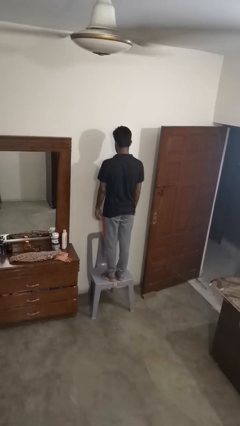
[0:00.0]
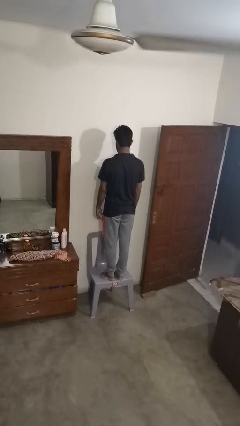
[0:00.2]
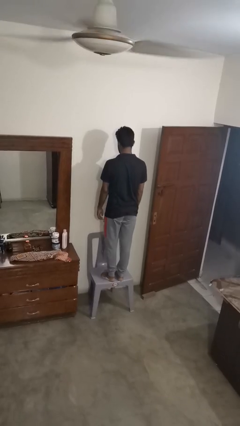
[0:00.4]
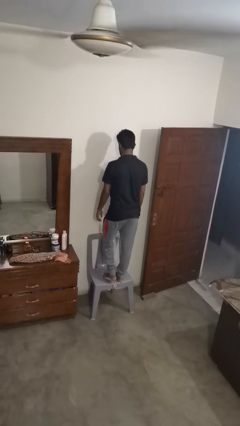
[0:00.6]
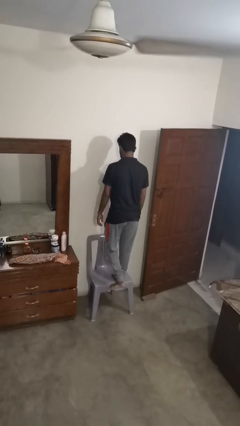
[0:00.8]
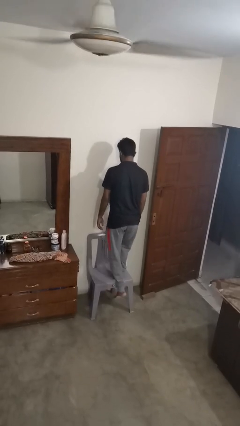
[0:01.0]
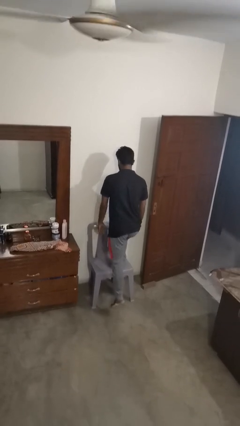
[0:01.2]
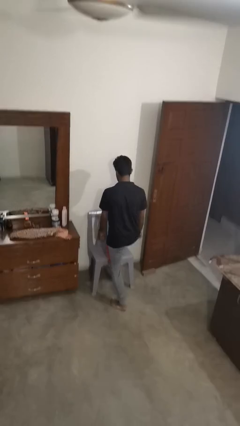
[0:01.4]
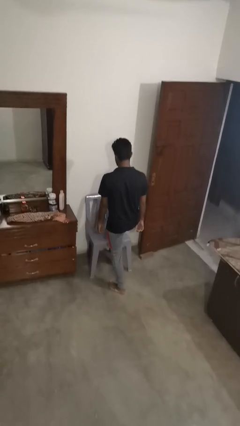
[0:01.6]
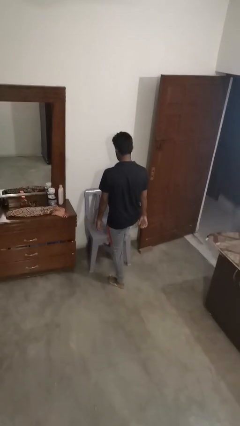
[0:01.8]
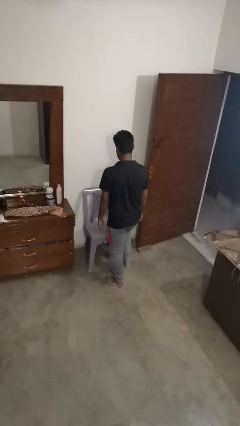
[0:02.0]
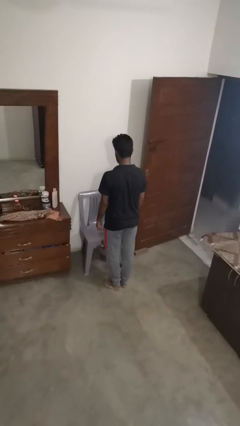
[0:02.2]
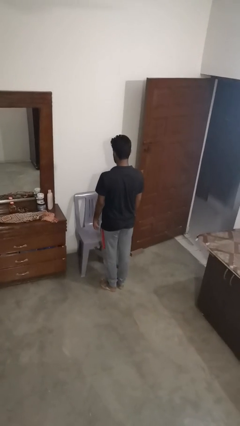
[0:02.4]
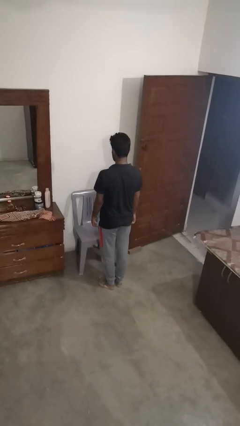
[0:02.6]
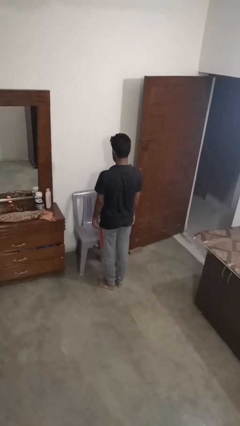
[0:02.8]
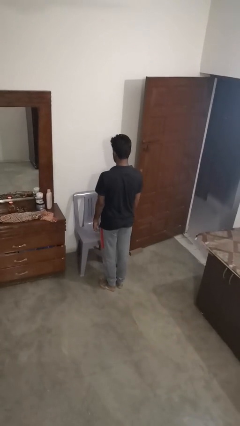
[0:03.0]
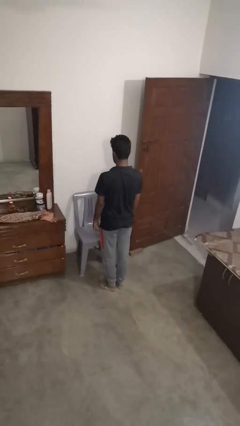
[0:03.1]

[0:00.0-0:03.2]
person climbs off chair

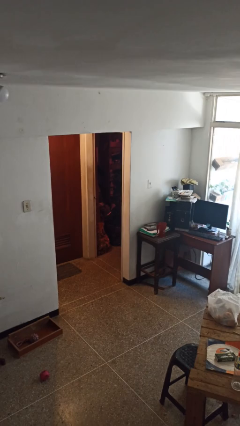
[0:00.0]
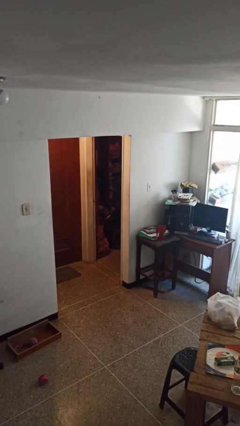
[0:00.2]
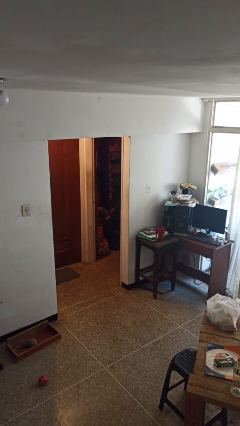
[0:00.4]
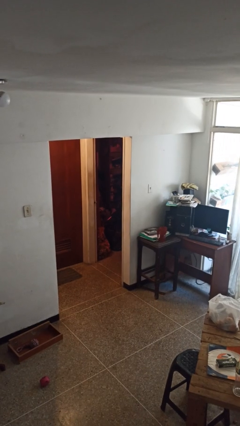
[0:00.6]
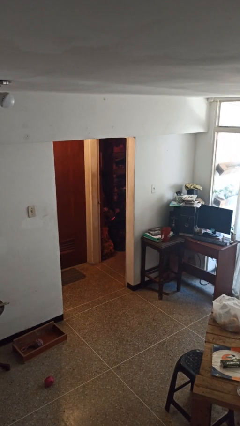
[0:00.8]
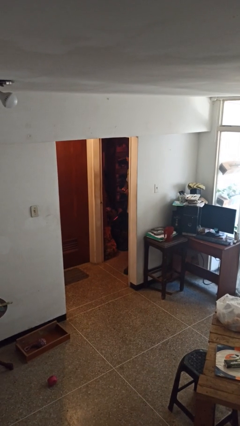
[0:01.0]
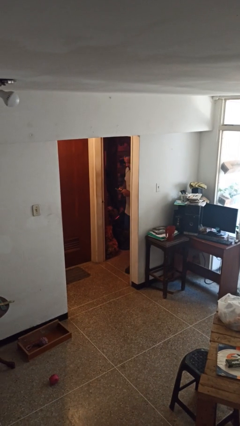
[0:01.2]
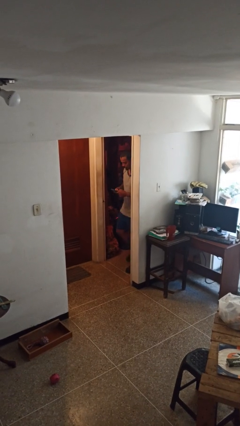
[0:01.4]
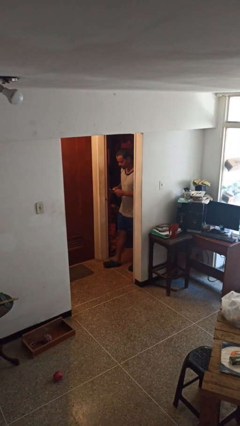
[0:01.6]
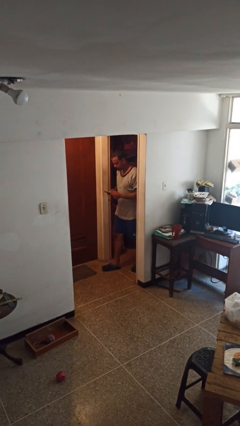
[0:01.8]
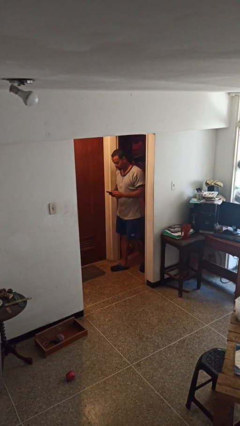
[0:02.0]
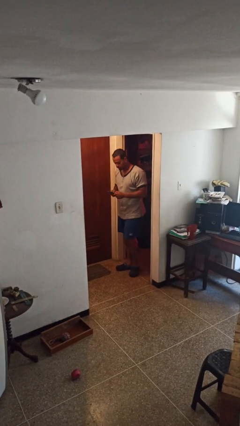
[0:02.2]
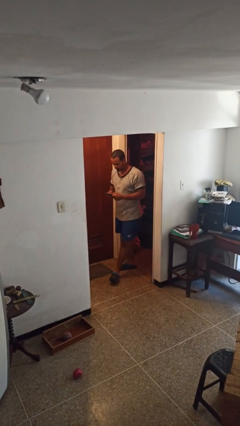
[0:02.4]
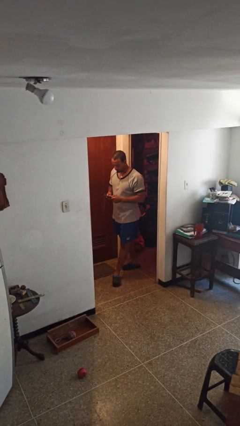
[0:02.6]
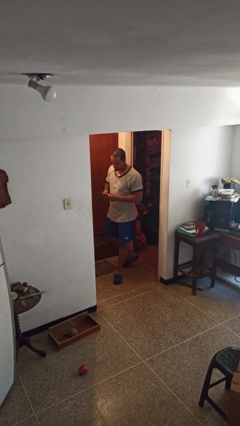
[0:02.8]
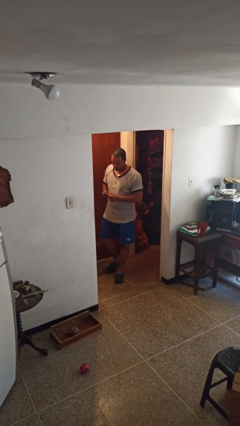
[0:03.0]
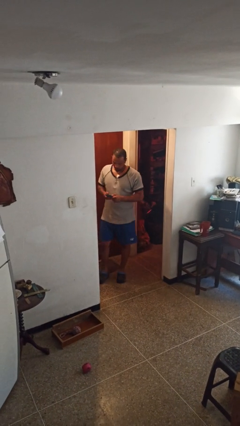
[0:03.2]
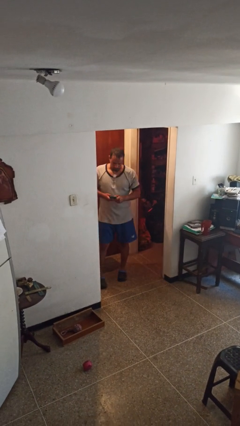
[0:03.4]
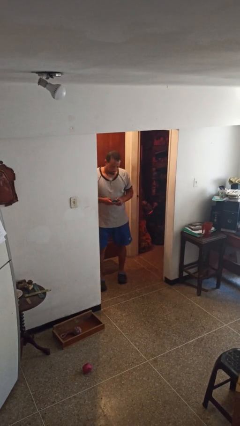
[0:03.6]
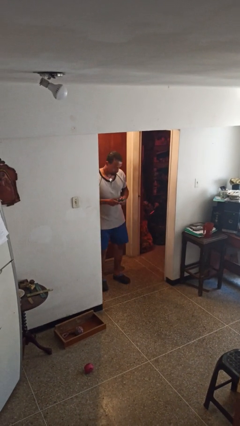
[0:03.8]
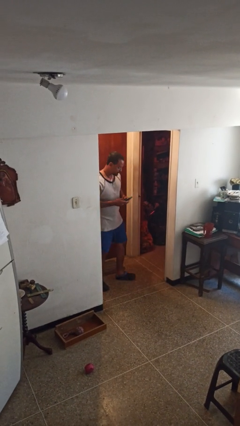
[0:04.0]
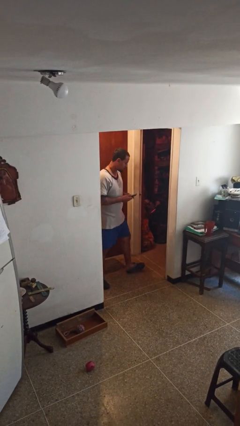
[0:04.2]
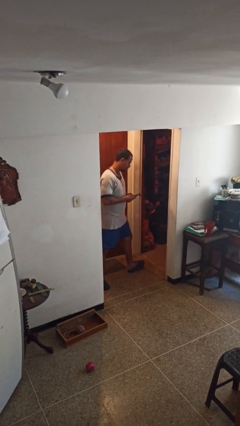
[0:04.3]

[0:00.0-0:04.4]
person enters scene through structure

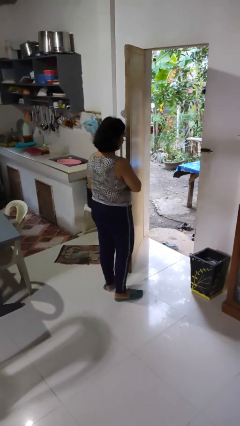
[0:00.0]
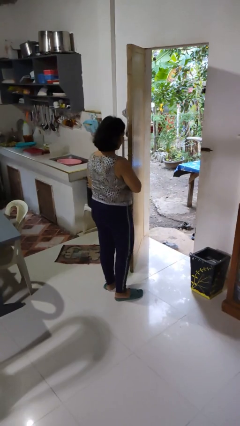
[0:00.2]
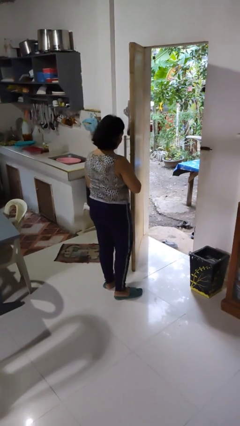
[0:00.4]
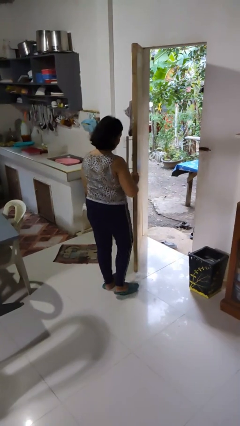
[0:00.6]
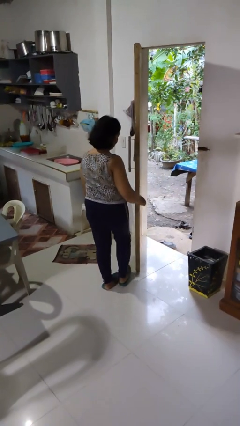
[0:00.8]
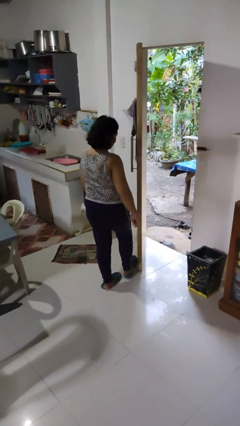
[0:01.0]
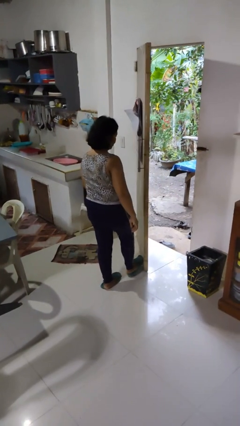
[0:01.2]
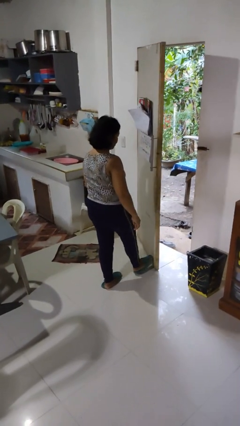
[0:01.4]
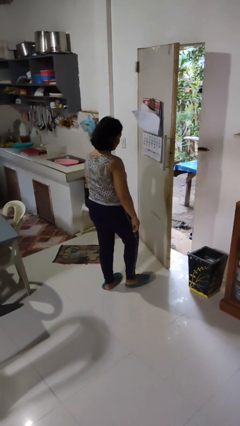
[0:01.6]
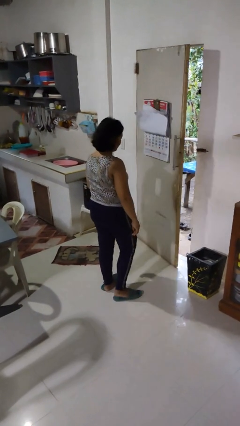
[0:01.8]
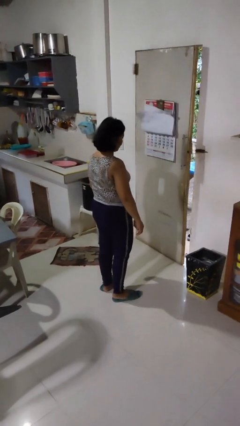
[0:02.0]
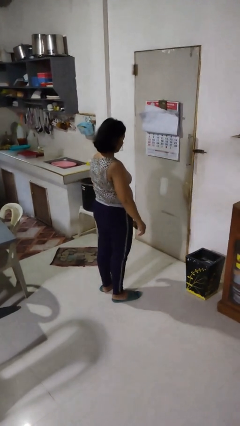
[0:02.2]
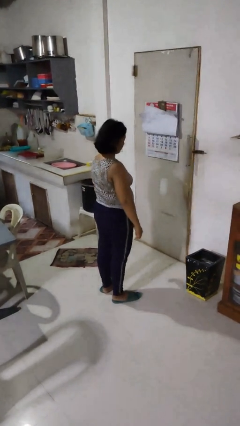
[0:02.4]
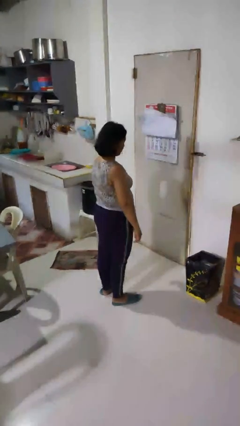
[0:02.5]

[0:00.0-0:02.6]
person closes door with foot

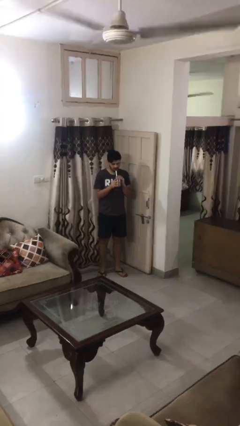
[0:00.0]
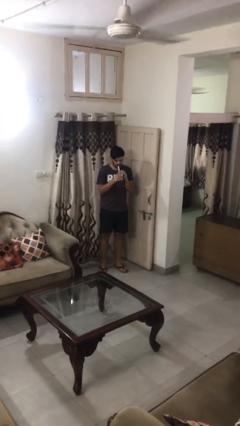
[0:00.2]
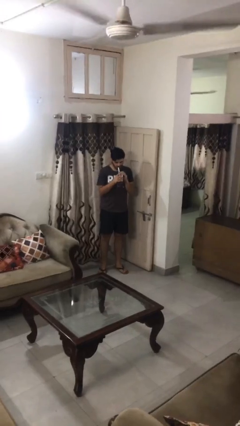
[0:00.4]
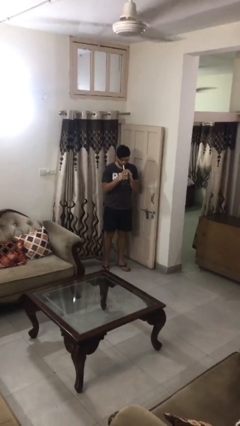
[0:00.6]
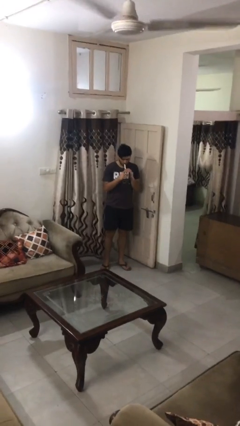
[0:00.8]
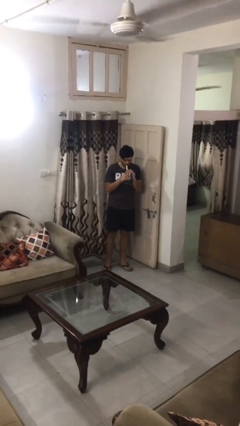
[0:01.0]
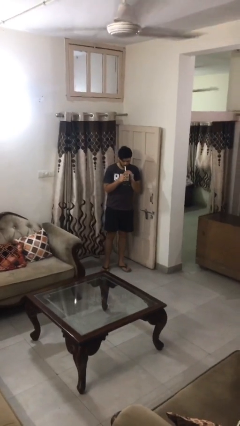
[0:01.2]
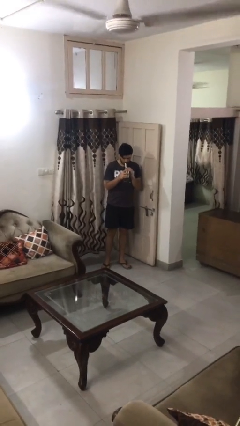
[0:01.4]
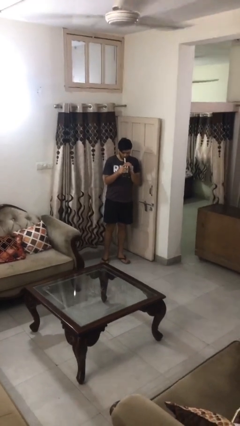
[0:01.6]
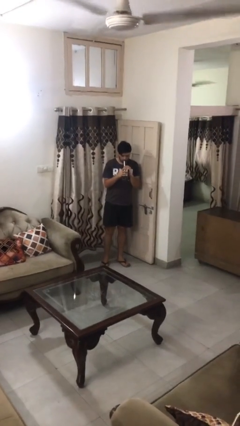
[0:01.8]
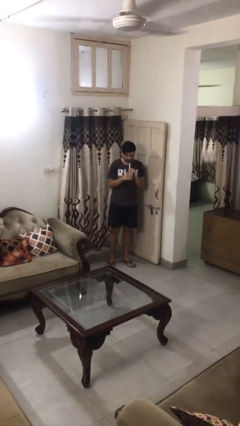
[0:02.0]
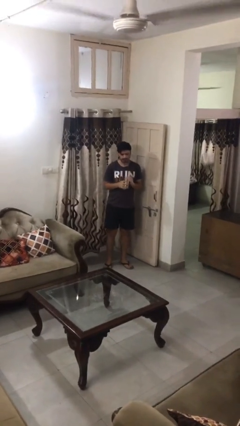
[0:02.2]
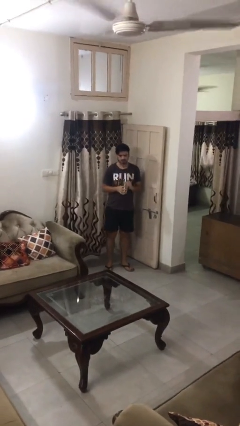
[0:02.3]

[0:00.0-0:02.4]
person drinks from straw

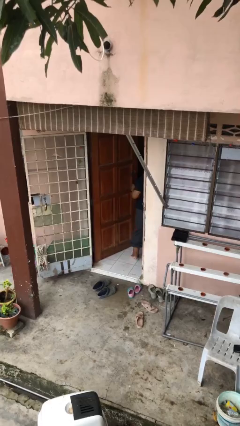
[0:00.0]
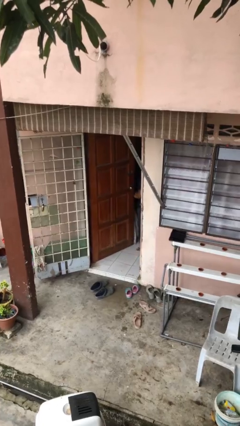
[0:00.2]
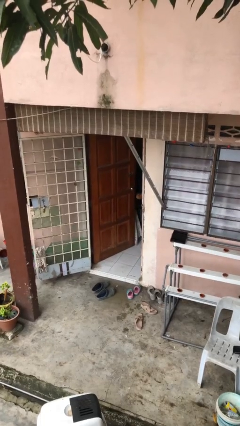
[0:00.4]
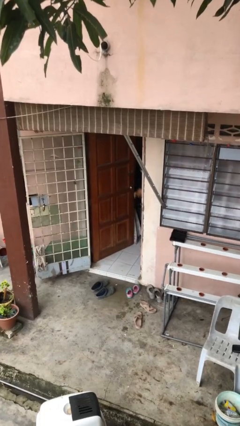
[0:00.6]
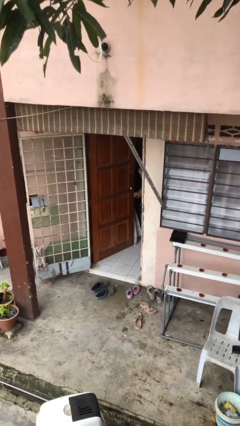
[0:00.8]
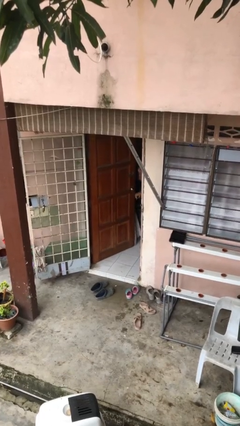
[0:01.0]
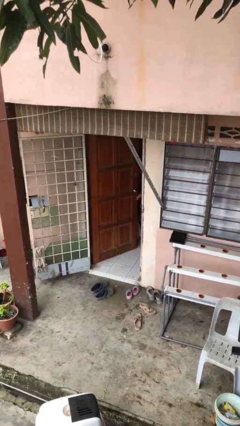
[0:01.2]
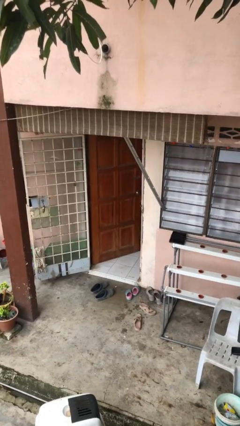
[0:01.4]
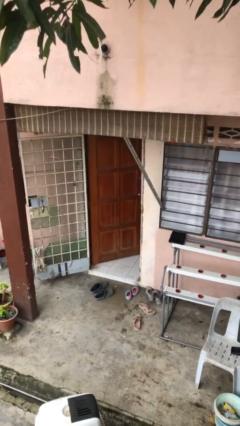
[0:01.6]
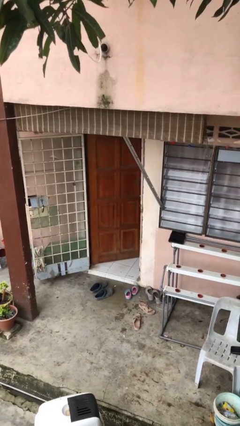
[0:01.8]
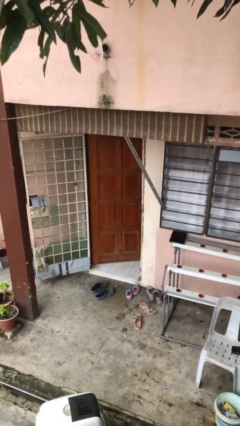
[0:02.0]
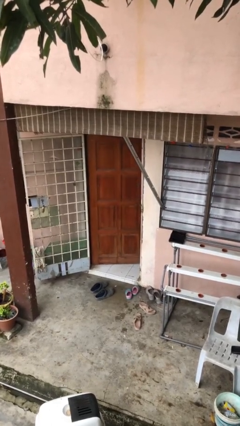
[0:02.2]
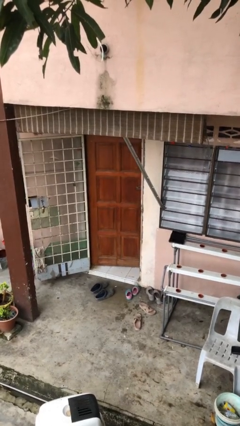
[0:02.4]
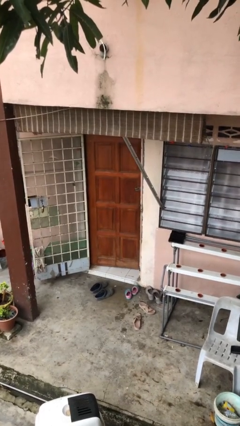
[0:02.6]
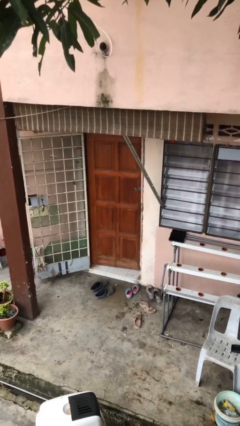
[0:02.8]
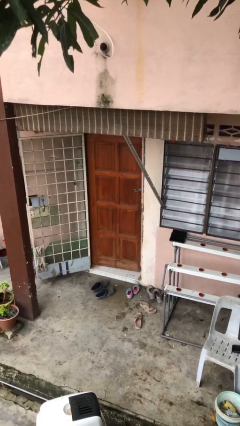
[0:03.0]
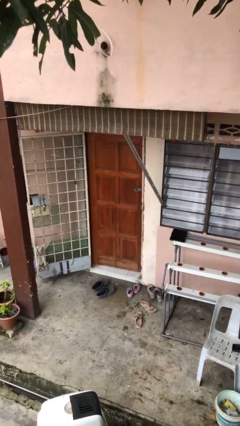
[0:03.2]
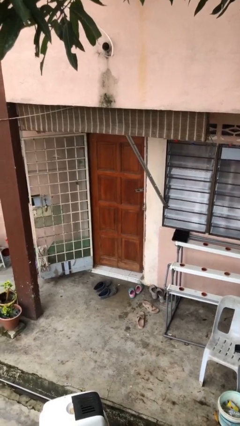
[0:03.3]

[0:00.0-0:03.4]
person closes facility door

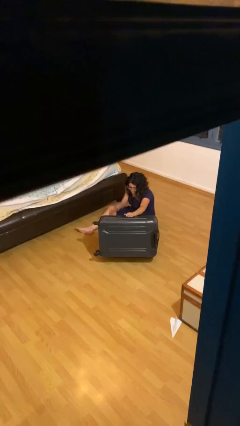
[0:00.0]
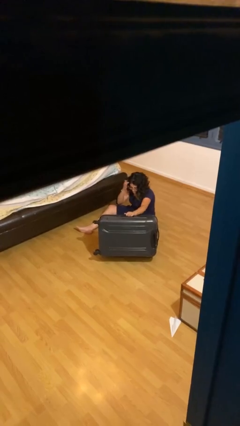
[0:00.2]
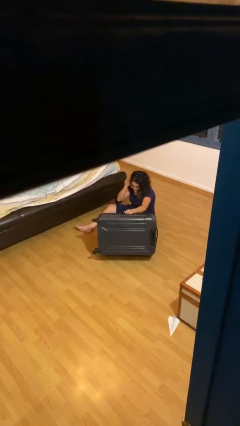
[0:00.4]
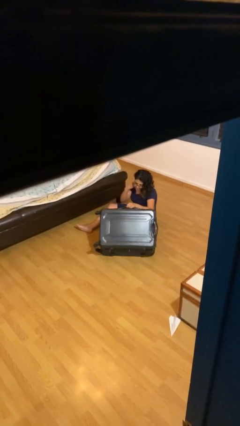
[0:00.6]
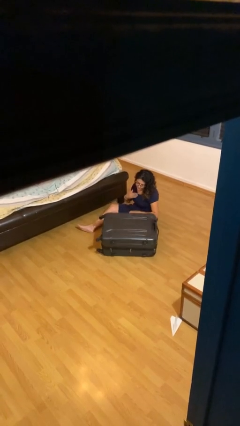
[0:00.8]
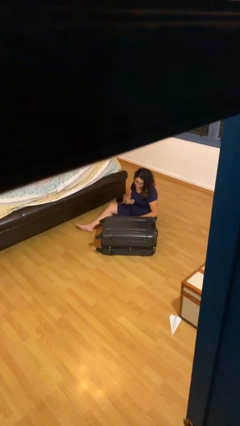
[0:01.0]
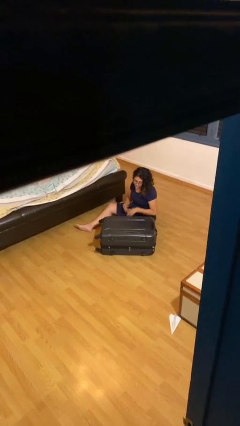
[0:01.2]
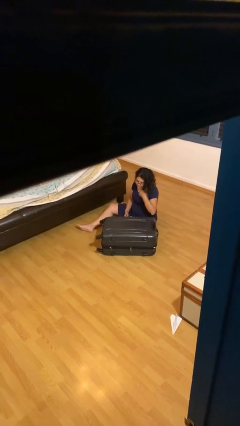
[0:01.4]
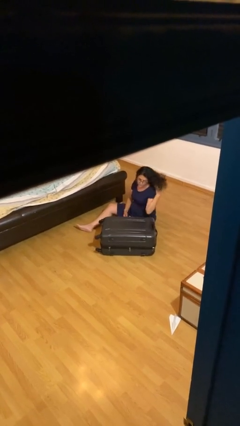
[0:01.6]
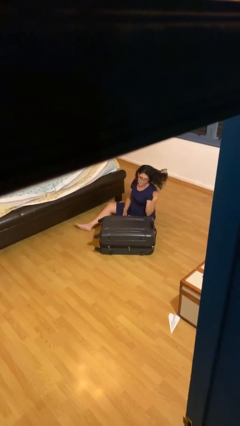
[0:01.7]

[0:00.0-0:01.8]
person closes suitcase
